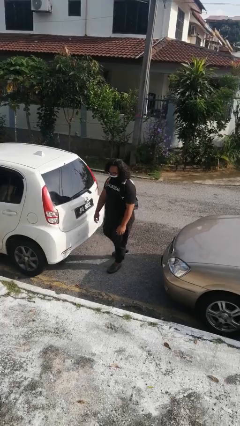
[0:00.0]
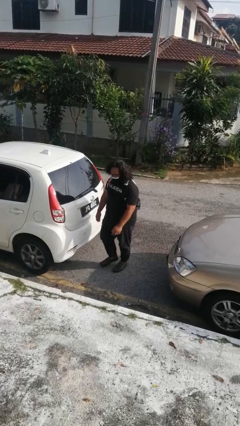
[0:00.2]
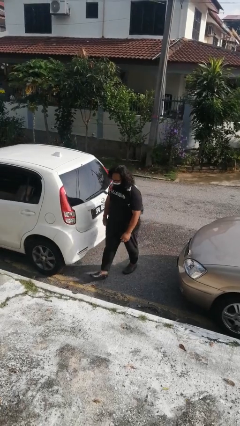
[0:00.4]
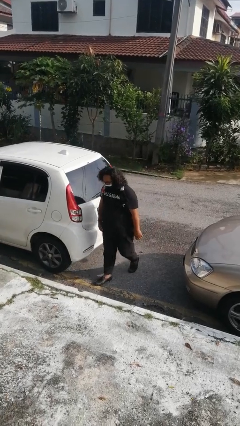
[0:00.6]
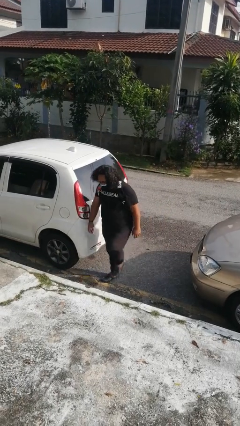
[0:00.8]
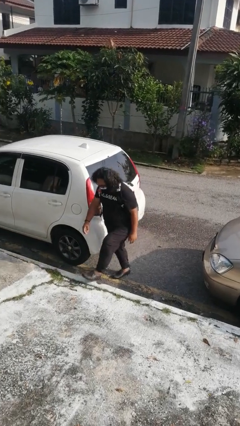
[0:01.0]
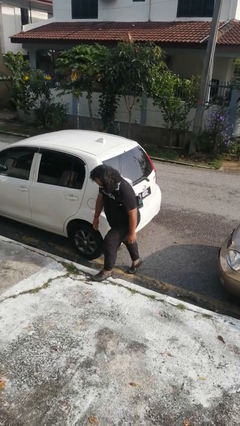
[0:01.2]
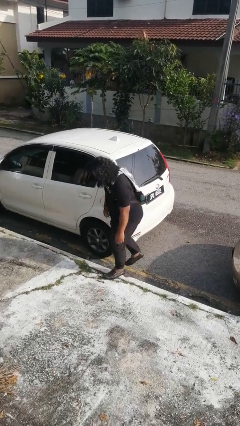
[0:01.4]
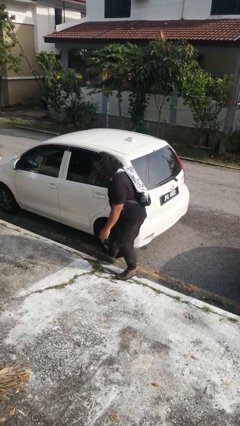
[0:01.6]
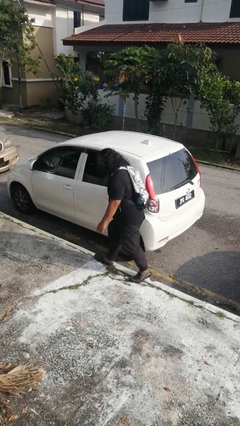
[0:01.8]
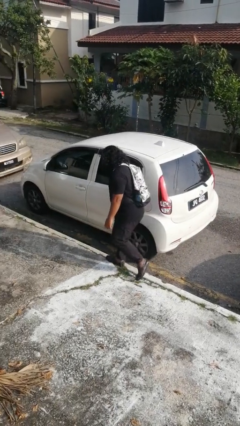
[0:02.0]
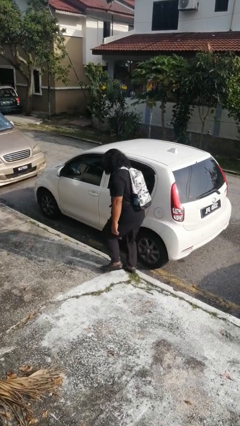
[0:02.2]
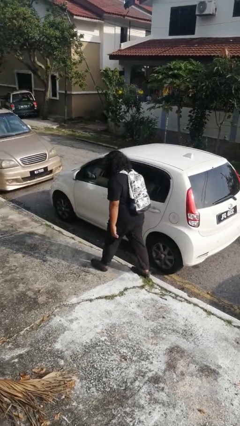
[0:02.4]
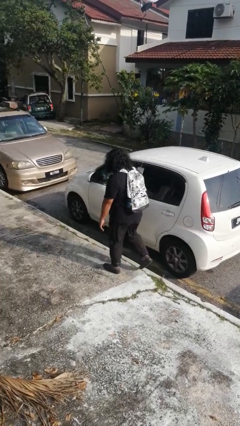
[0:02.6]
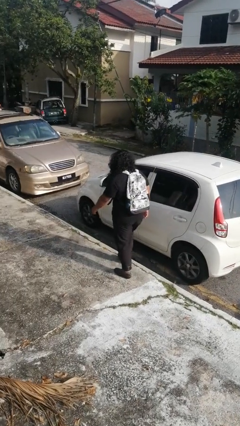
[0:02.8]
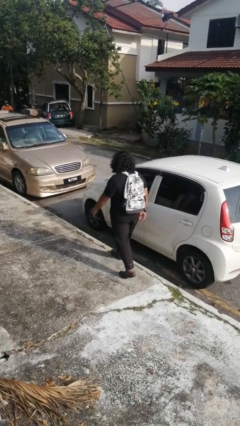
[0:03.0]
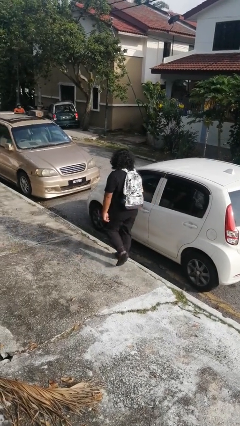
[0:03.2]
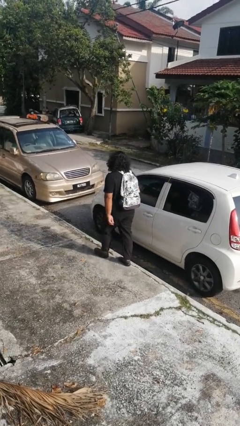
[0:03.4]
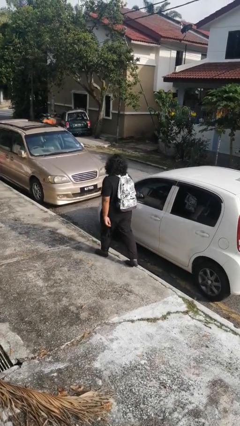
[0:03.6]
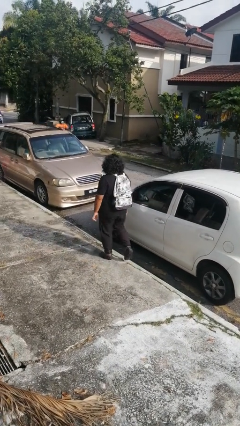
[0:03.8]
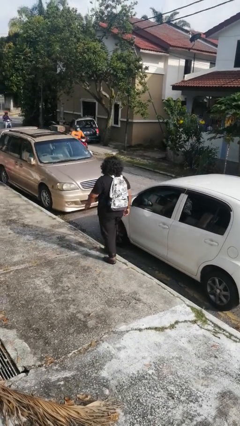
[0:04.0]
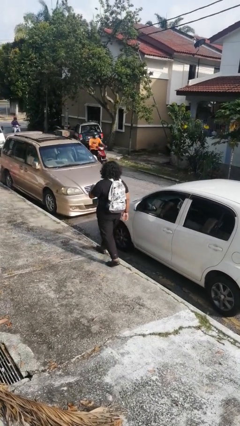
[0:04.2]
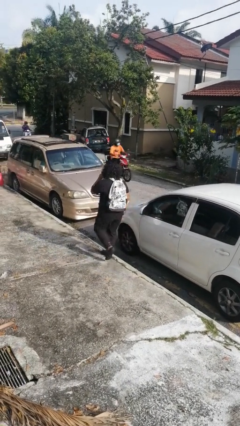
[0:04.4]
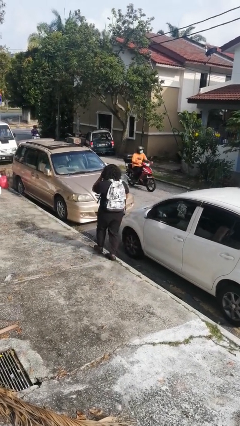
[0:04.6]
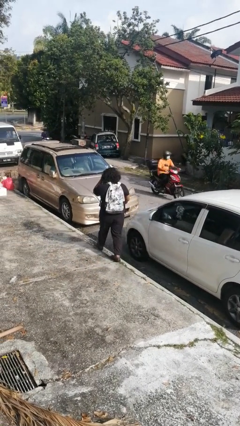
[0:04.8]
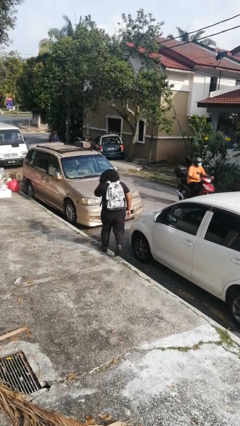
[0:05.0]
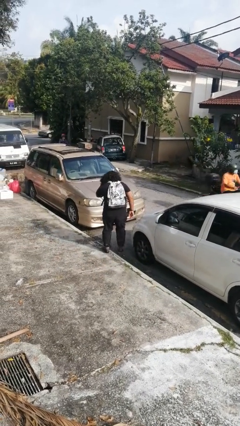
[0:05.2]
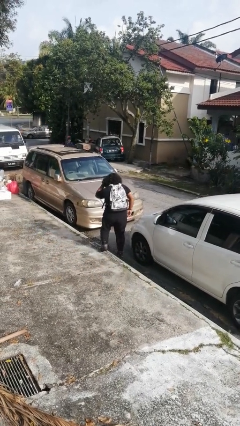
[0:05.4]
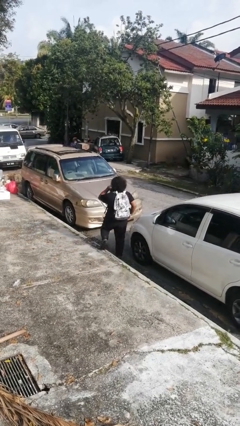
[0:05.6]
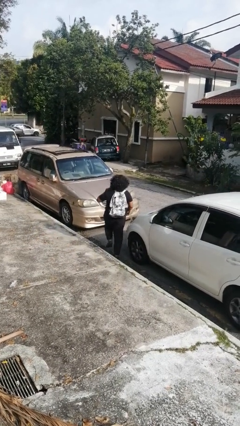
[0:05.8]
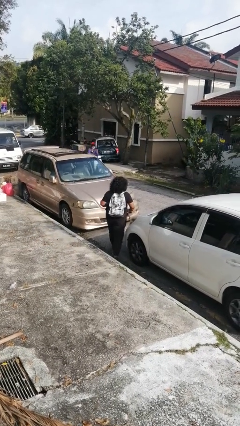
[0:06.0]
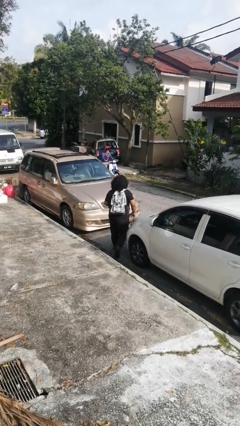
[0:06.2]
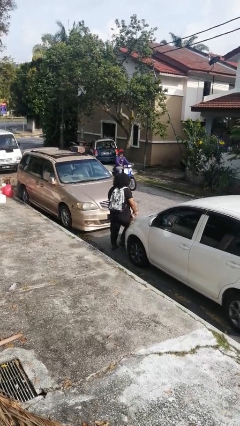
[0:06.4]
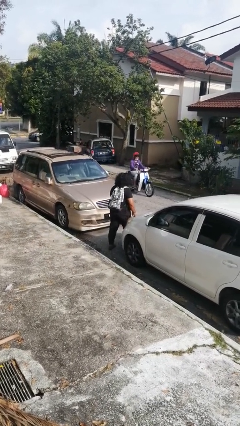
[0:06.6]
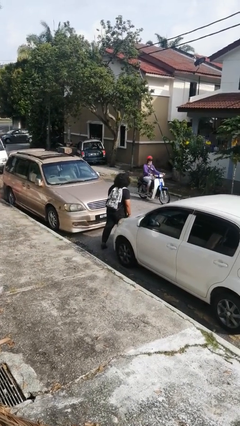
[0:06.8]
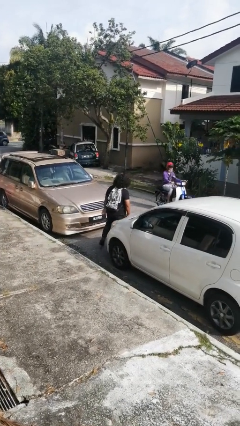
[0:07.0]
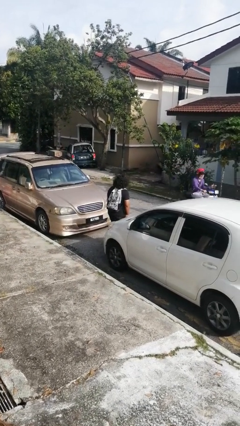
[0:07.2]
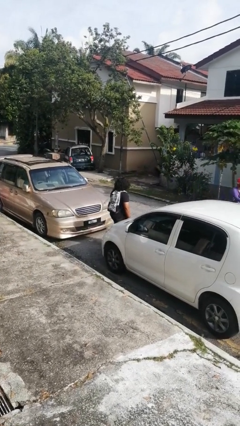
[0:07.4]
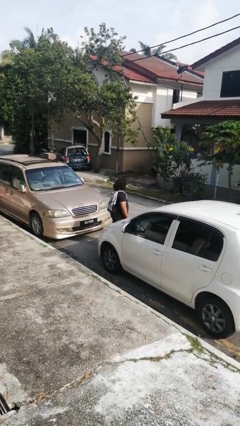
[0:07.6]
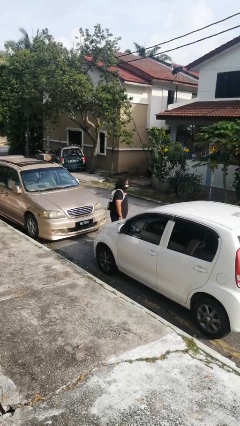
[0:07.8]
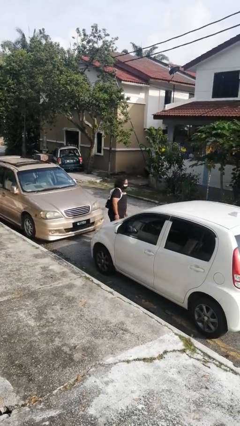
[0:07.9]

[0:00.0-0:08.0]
person walks around car

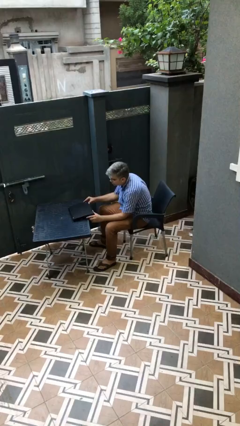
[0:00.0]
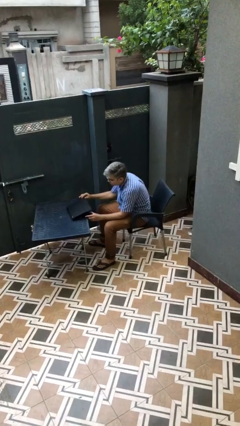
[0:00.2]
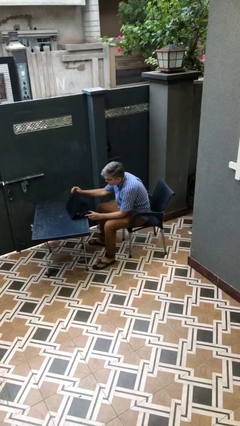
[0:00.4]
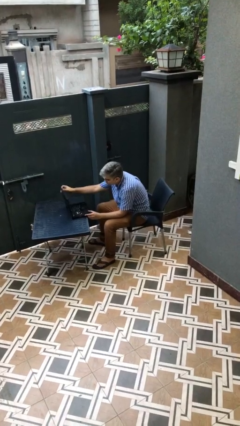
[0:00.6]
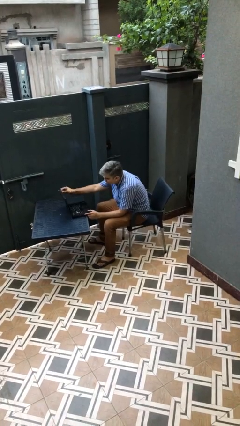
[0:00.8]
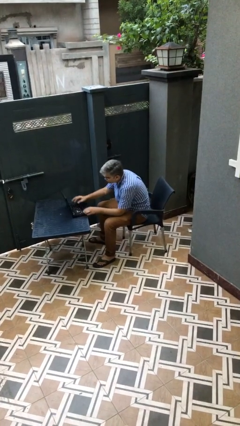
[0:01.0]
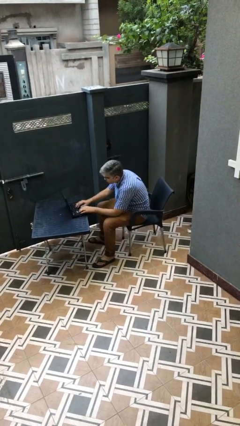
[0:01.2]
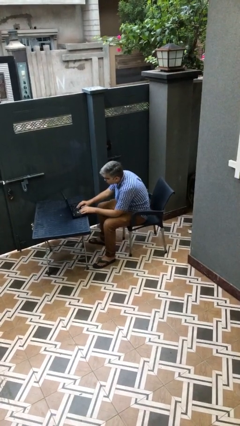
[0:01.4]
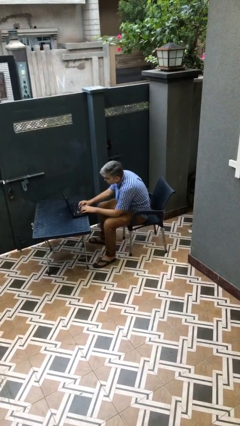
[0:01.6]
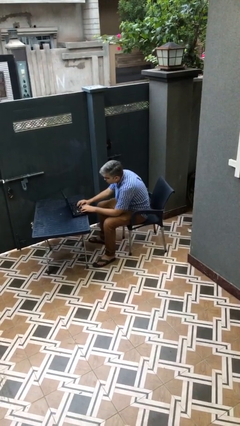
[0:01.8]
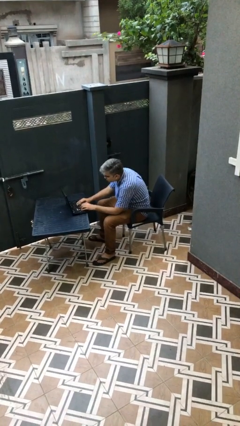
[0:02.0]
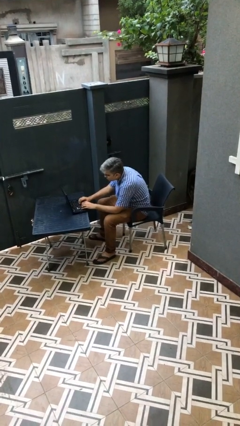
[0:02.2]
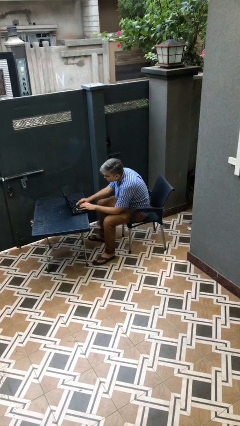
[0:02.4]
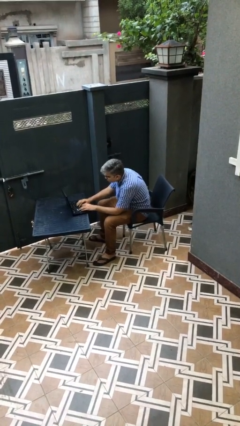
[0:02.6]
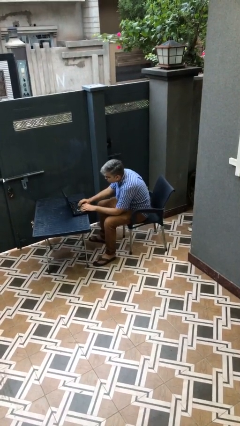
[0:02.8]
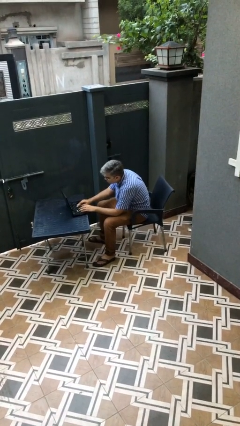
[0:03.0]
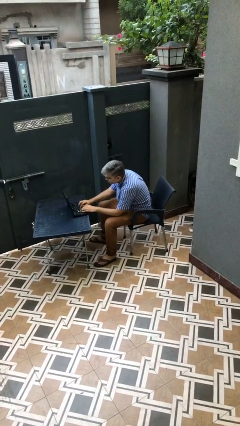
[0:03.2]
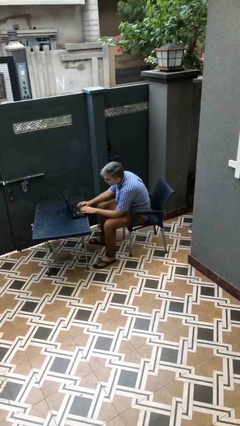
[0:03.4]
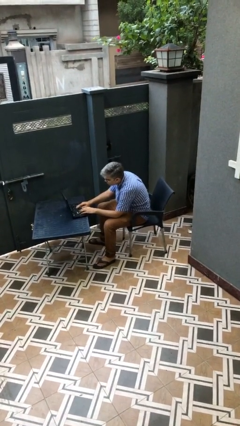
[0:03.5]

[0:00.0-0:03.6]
person interacts with laptop

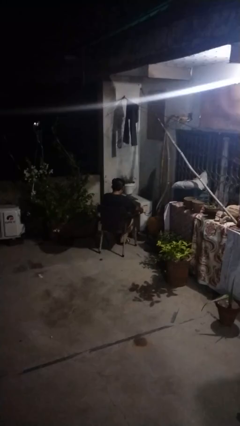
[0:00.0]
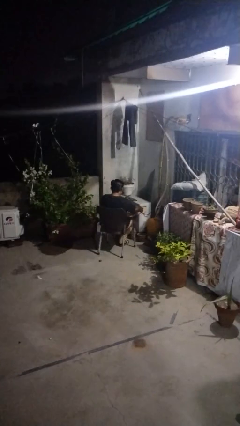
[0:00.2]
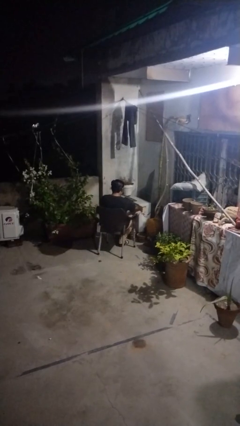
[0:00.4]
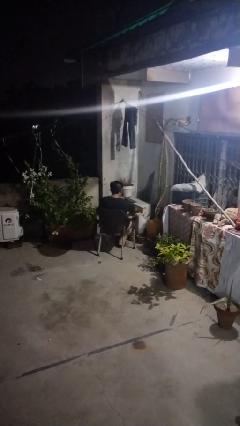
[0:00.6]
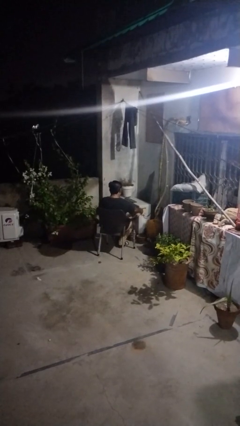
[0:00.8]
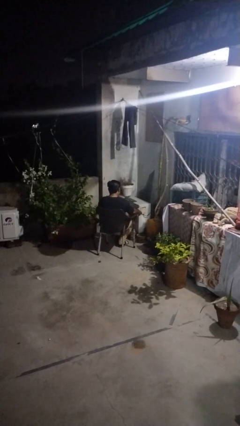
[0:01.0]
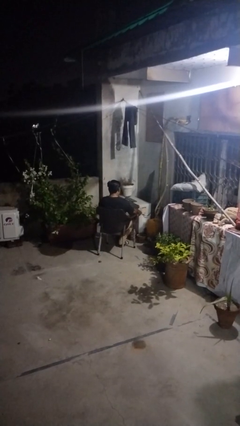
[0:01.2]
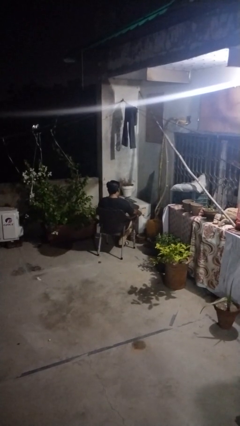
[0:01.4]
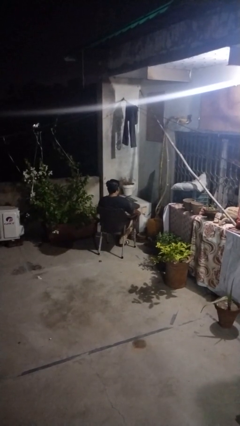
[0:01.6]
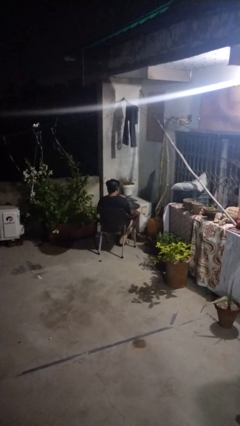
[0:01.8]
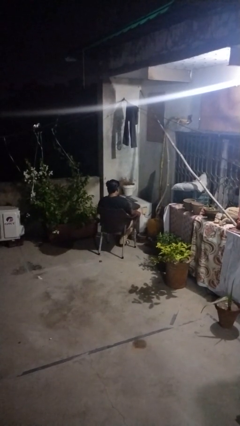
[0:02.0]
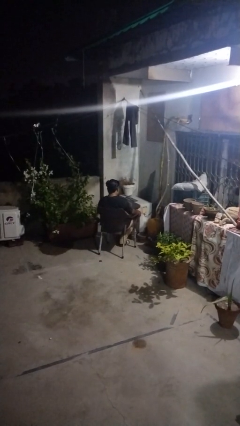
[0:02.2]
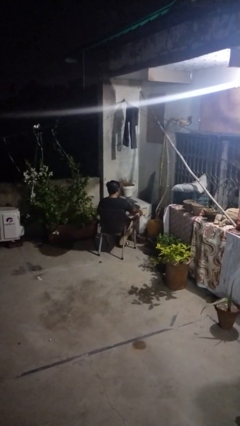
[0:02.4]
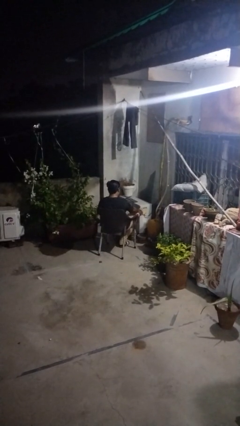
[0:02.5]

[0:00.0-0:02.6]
person rubs foot

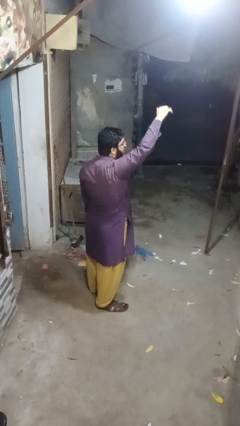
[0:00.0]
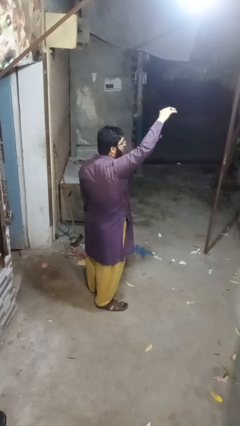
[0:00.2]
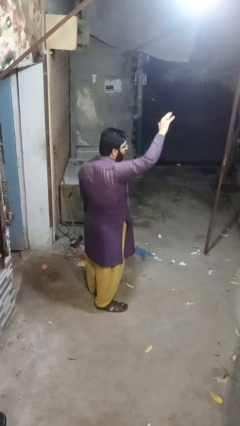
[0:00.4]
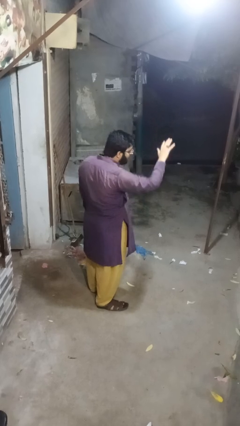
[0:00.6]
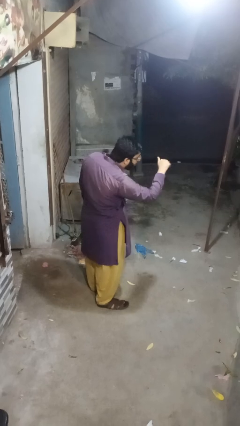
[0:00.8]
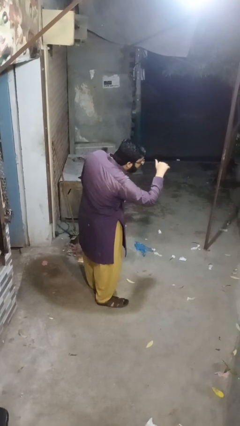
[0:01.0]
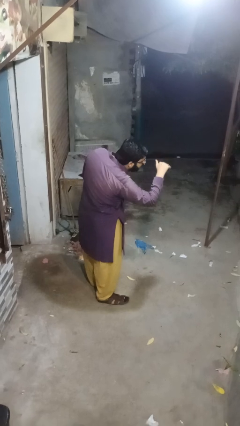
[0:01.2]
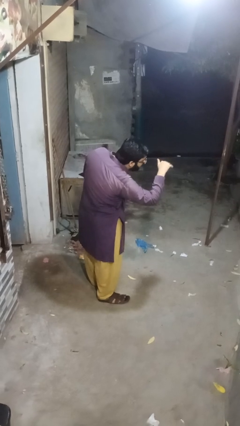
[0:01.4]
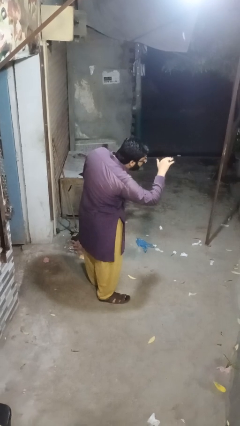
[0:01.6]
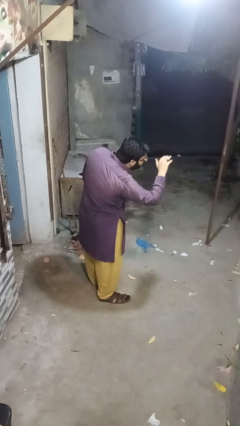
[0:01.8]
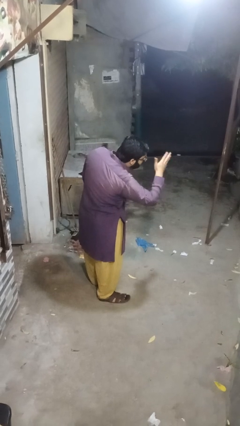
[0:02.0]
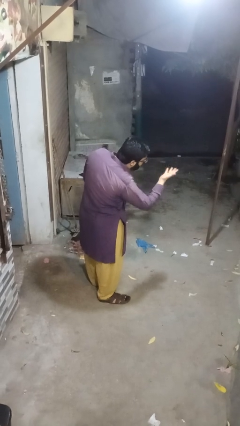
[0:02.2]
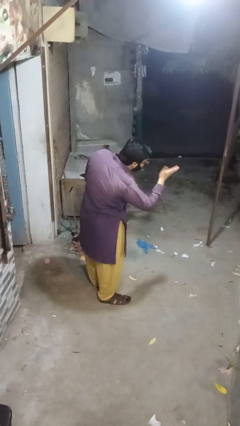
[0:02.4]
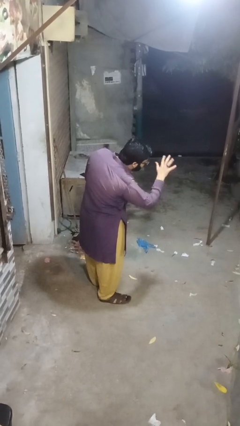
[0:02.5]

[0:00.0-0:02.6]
person gestures lower hand

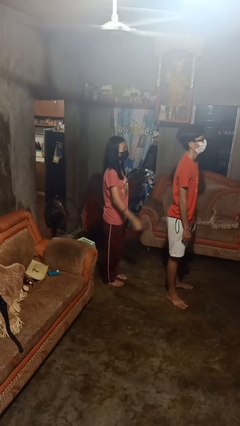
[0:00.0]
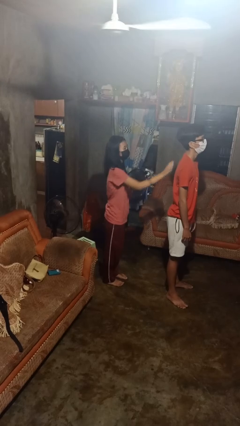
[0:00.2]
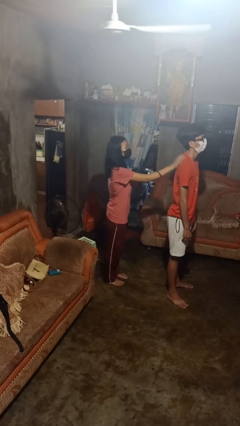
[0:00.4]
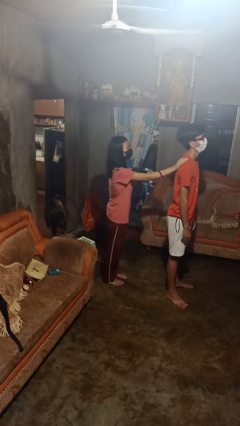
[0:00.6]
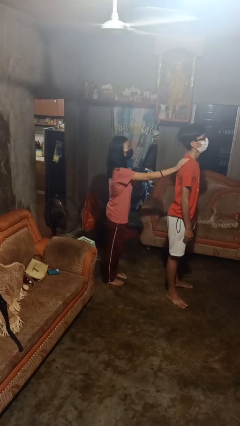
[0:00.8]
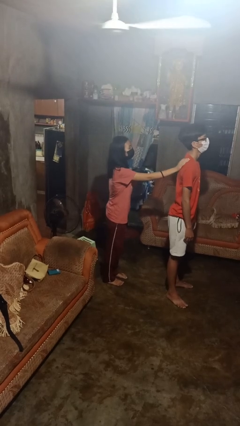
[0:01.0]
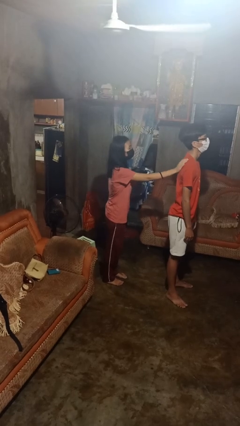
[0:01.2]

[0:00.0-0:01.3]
person touches back of person
